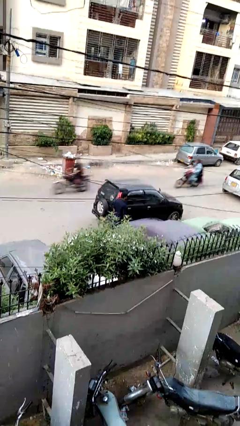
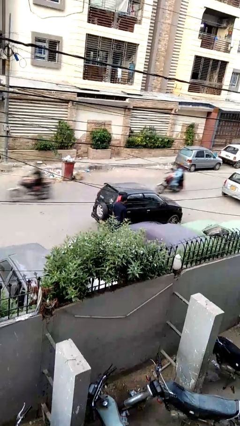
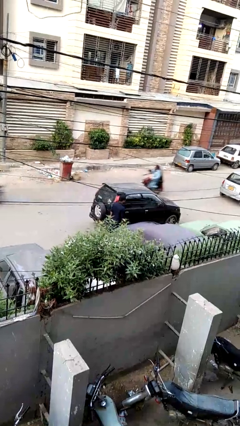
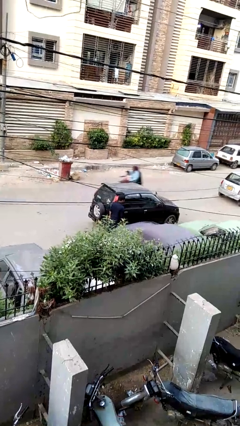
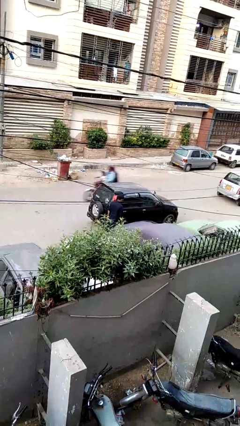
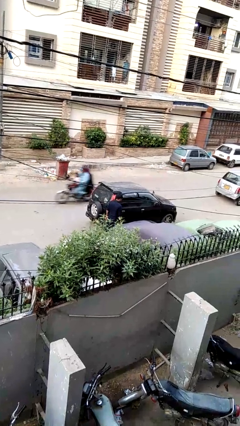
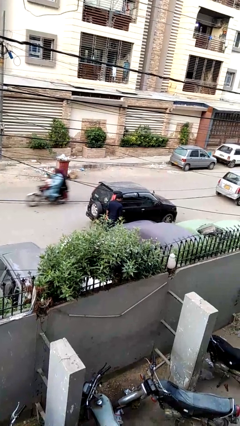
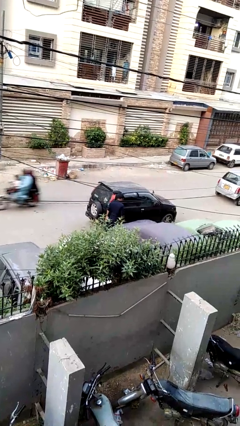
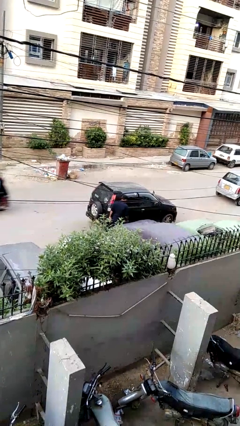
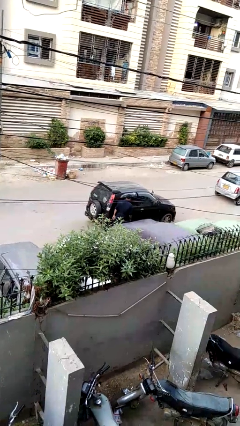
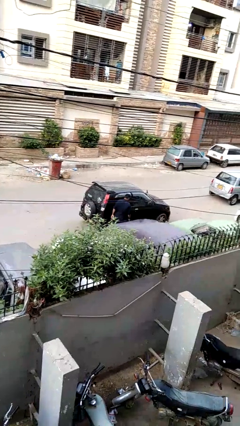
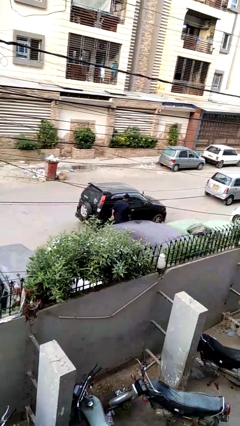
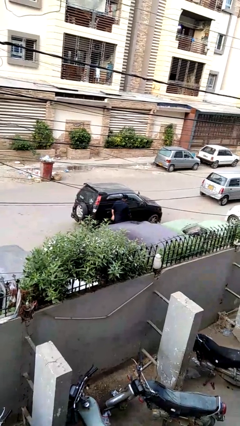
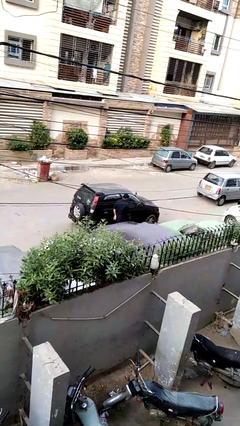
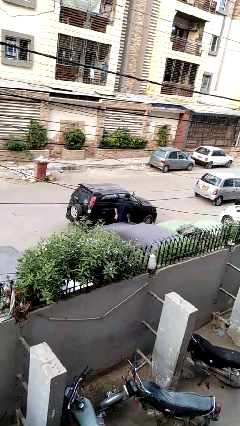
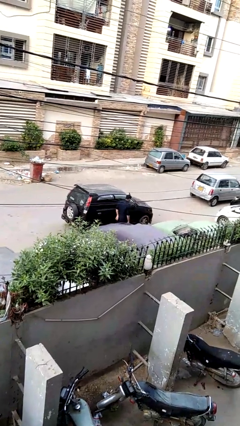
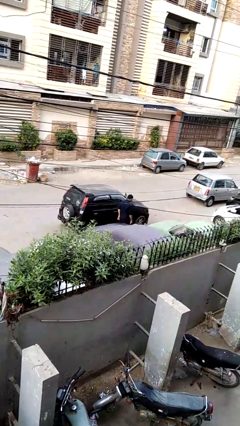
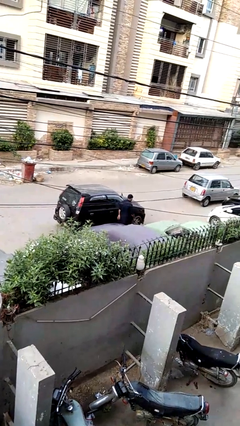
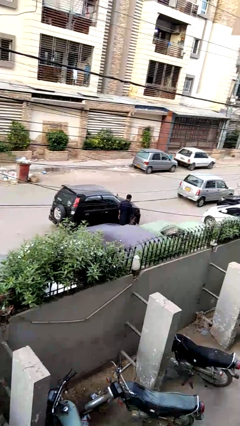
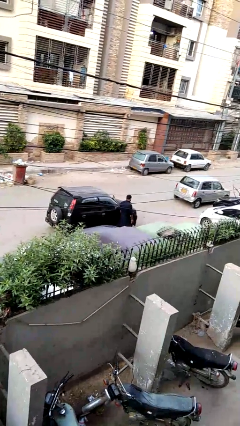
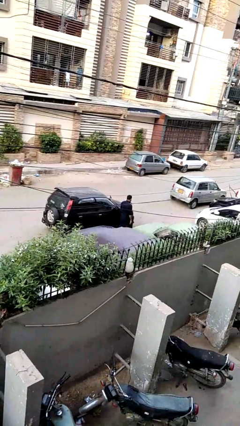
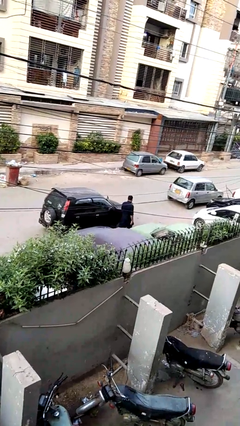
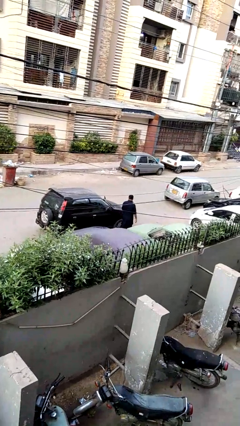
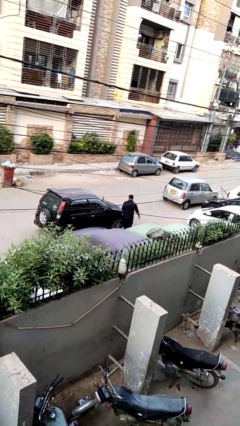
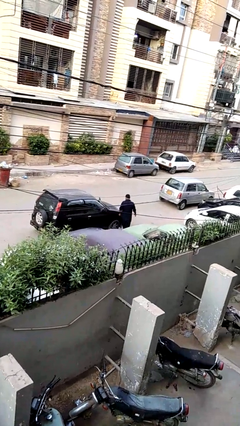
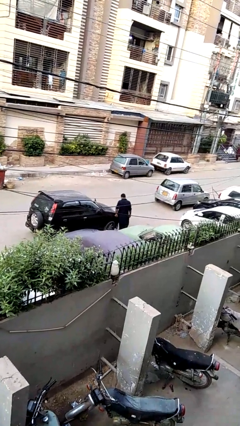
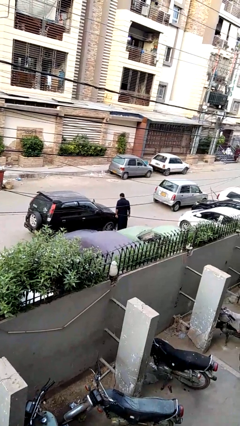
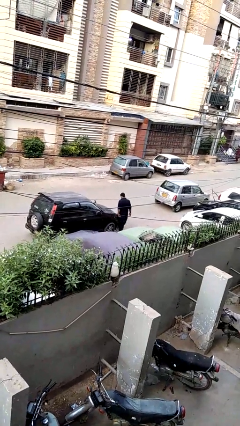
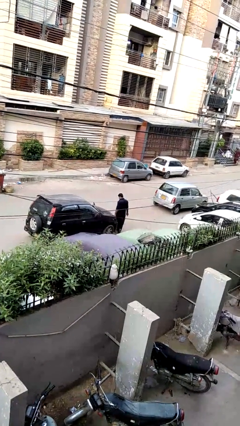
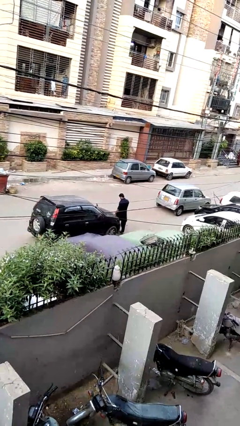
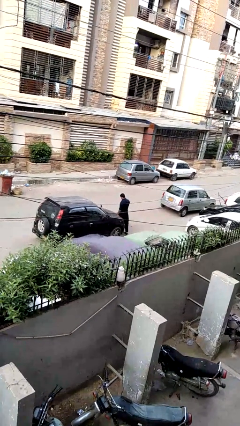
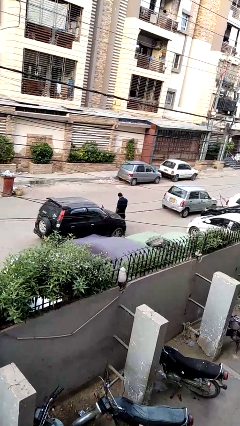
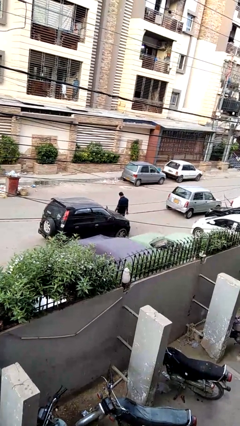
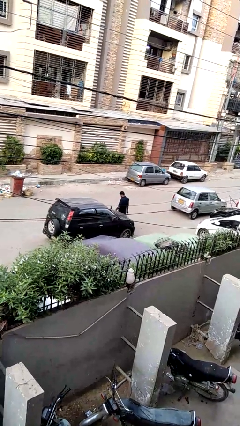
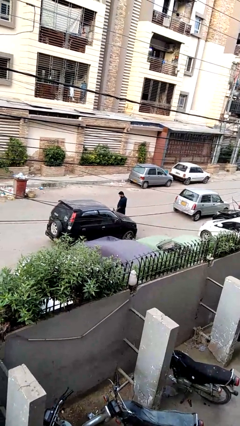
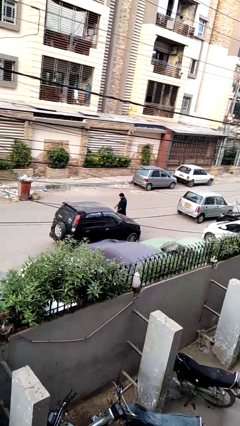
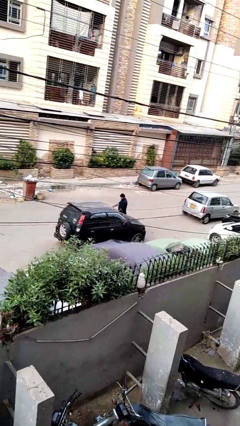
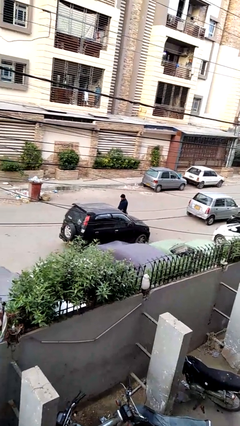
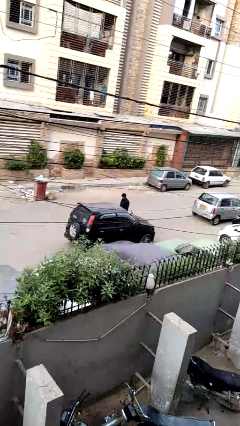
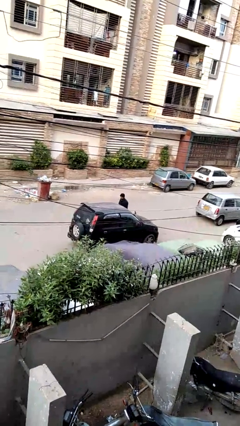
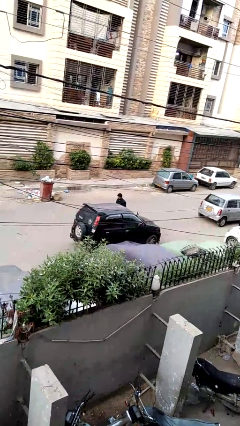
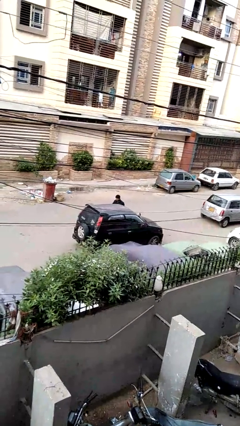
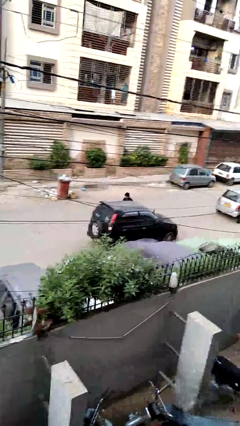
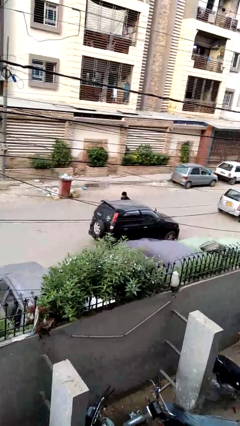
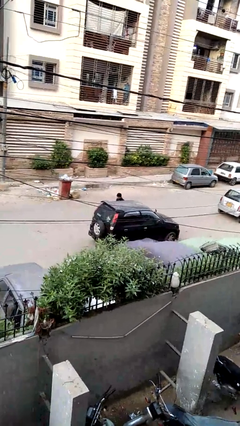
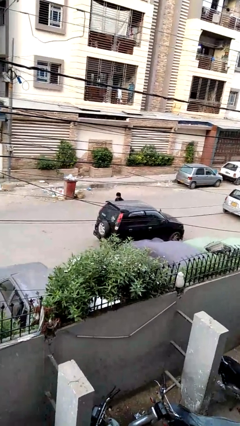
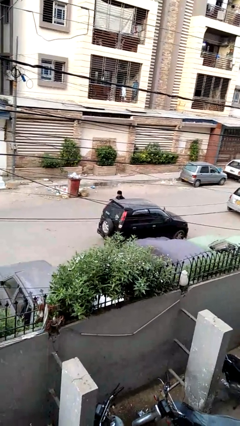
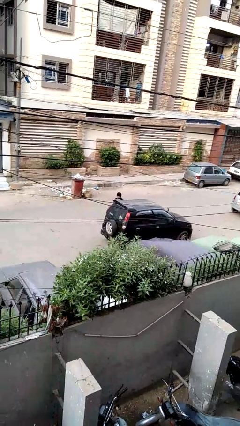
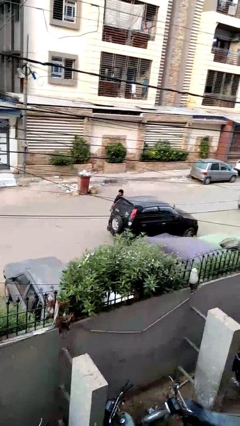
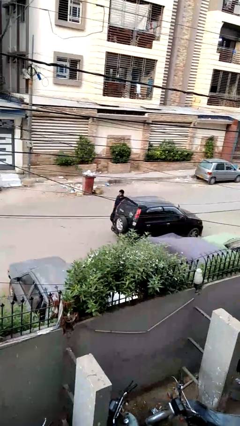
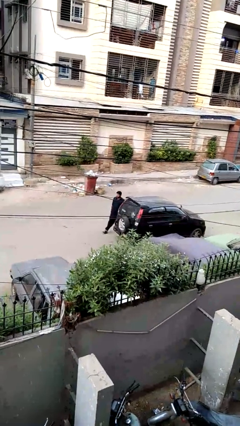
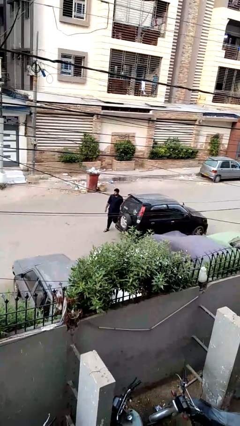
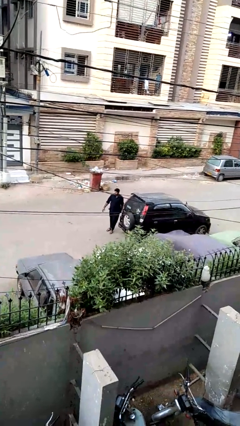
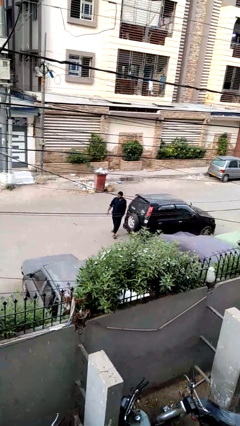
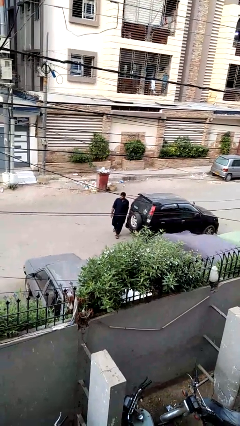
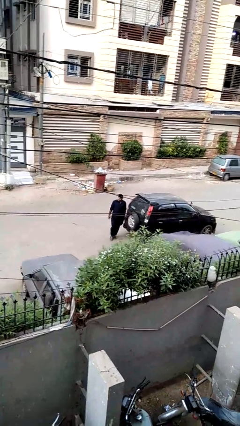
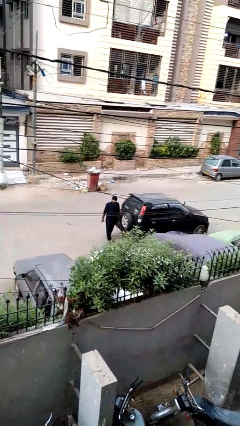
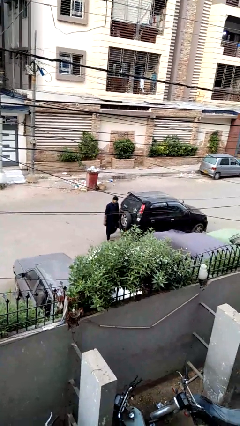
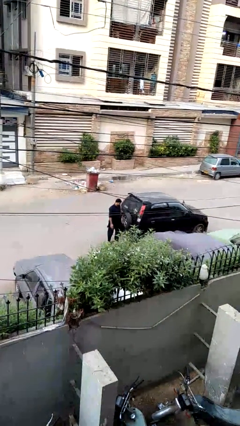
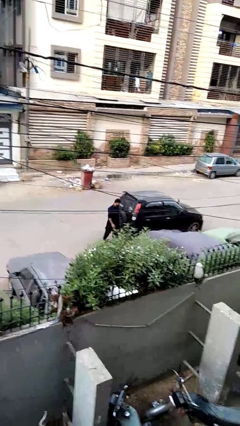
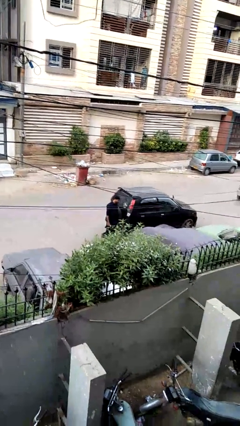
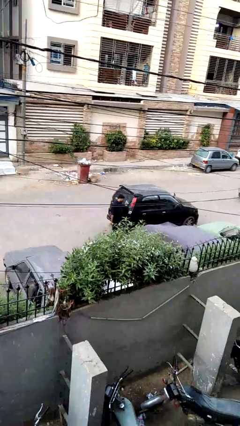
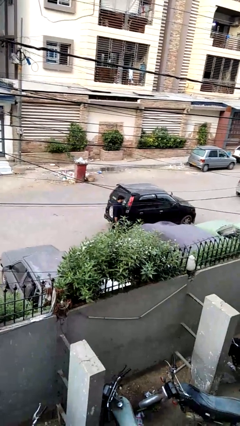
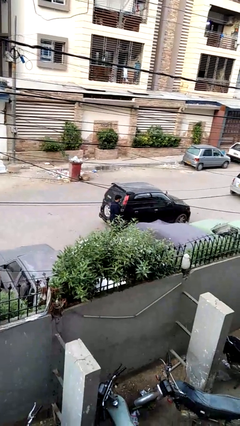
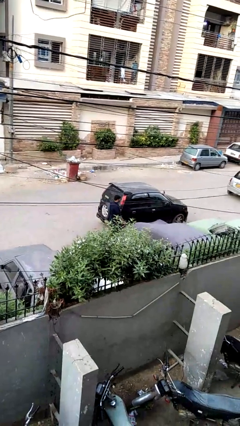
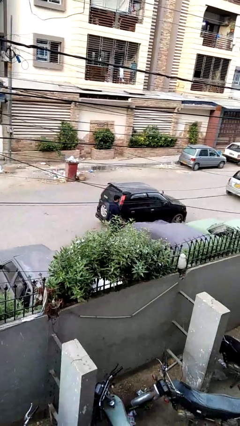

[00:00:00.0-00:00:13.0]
person walks around car

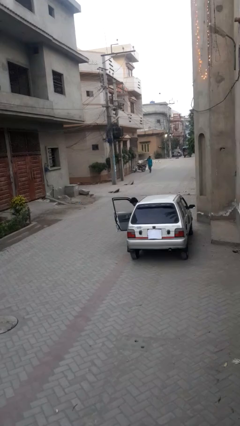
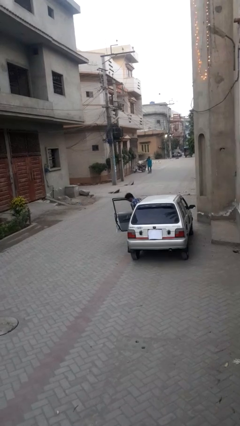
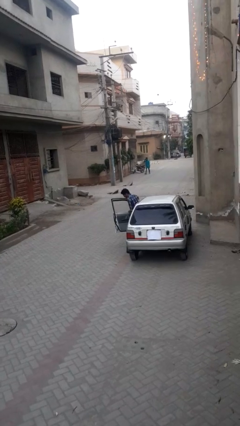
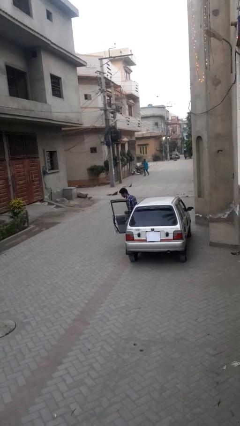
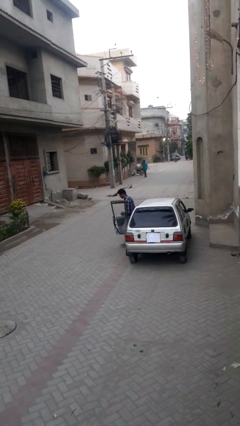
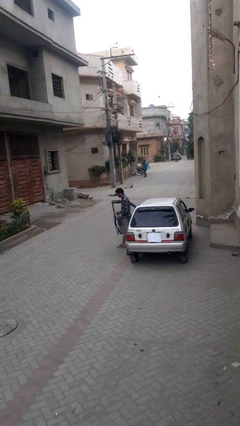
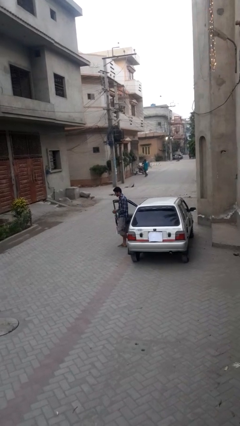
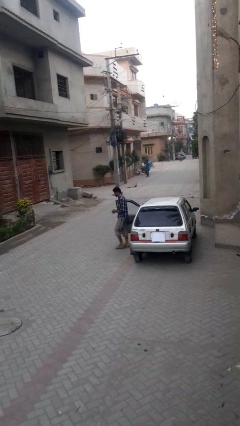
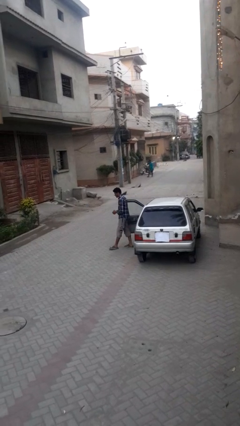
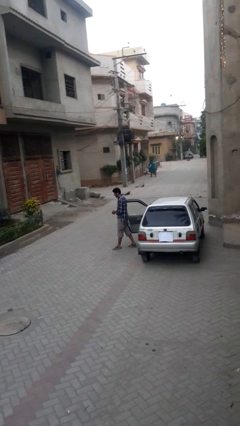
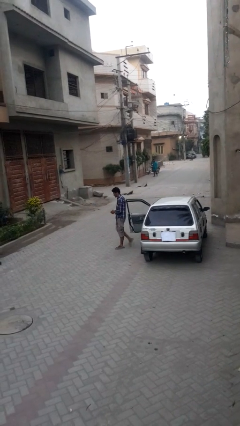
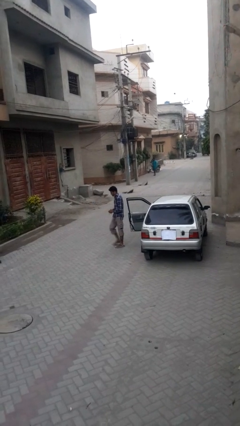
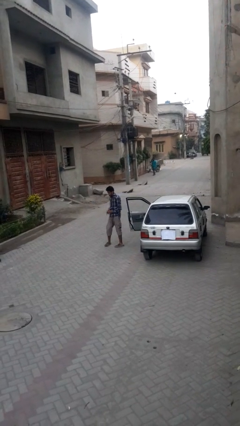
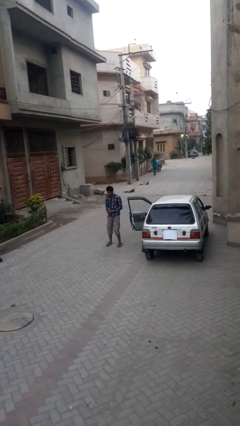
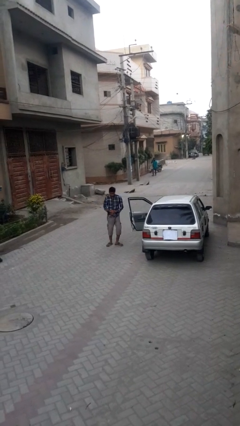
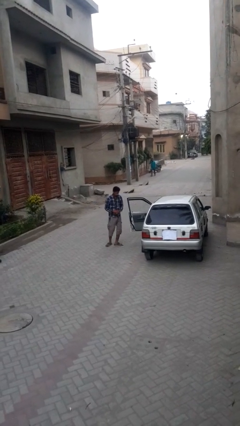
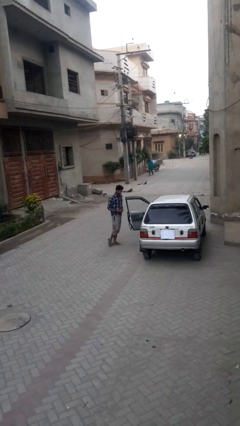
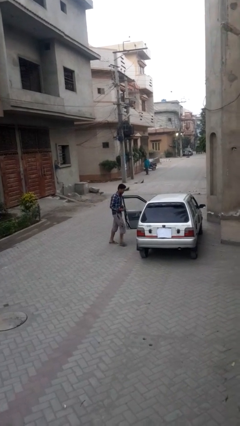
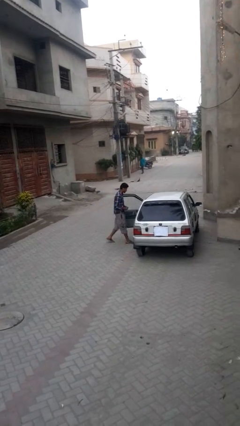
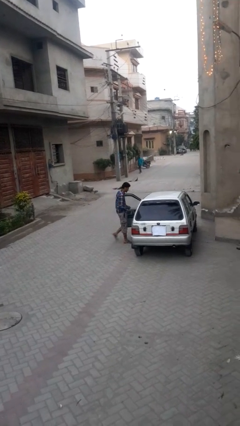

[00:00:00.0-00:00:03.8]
person exits car

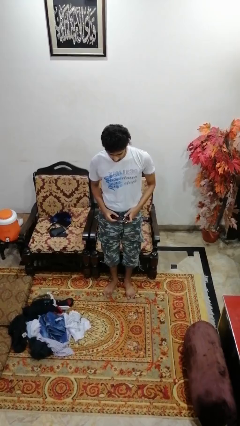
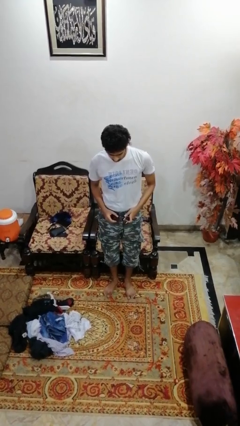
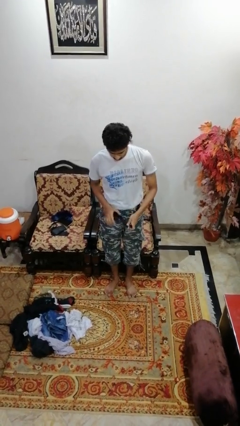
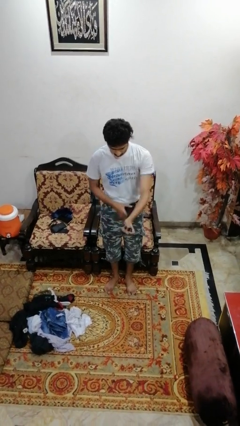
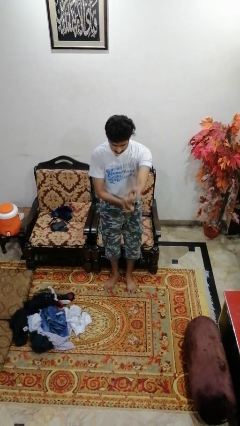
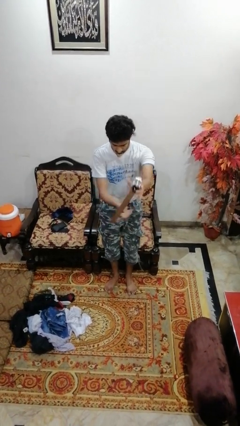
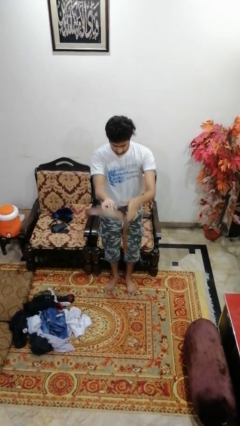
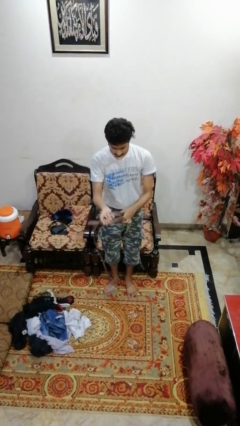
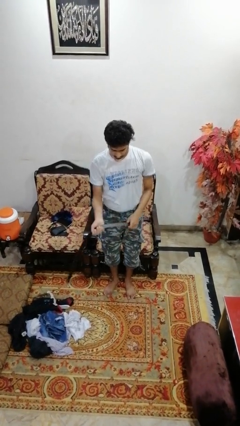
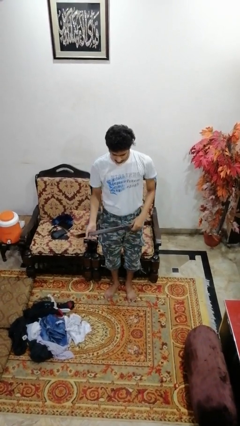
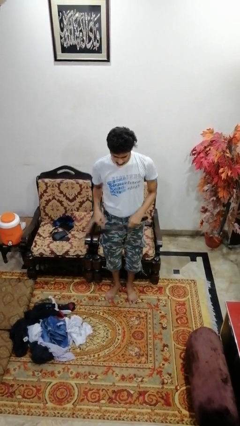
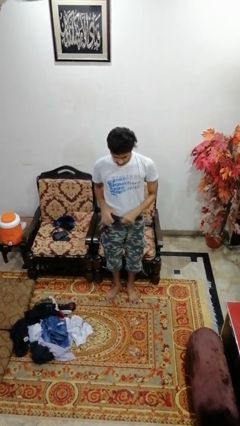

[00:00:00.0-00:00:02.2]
person takes off belt
